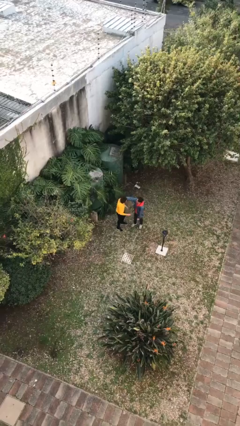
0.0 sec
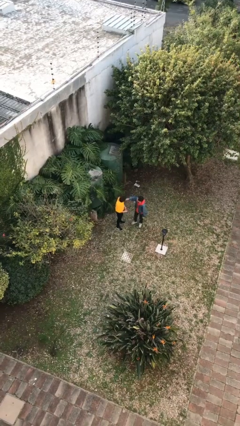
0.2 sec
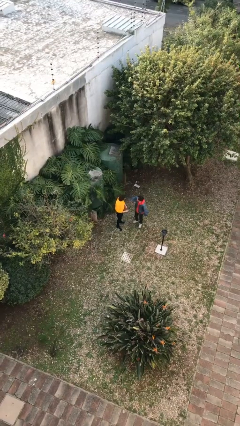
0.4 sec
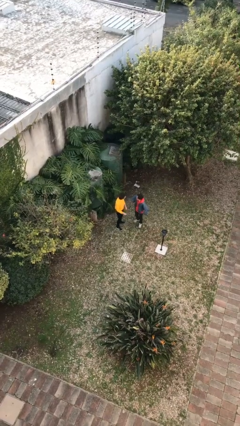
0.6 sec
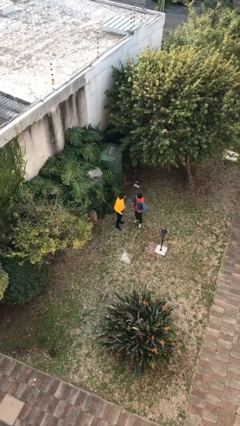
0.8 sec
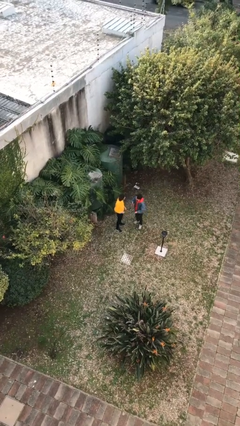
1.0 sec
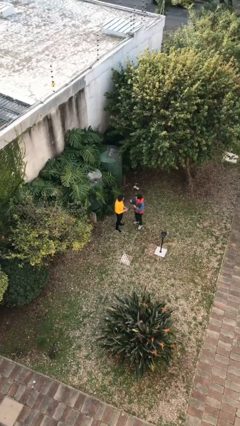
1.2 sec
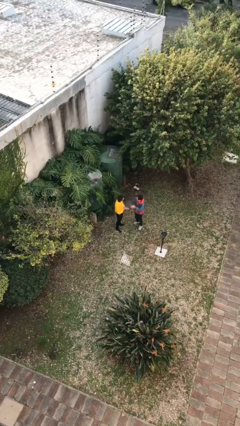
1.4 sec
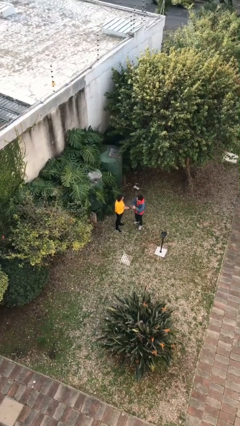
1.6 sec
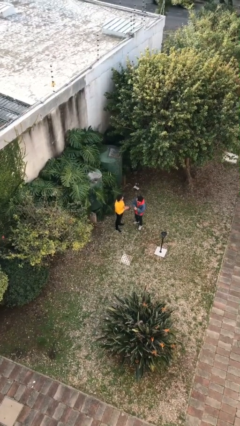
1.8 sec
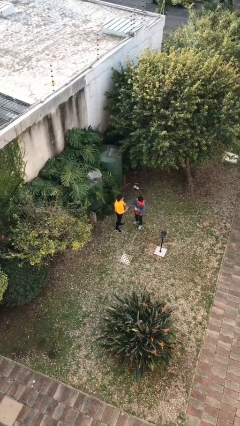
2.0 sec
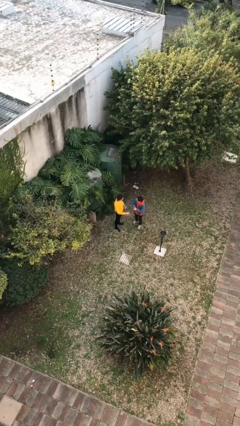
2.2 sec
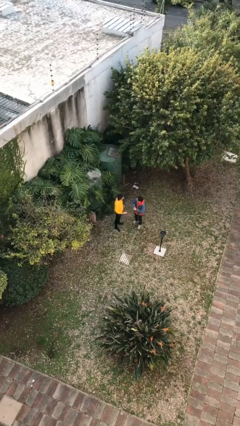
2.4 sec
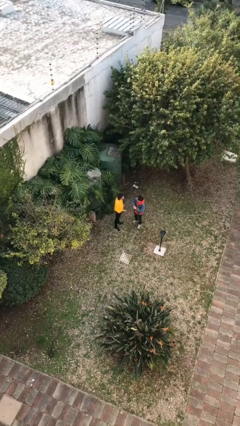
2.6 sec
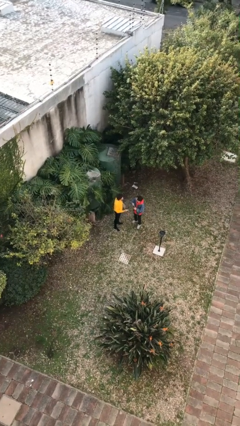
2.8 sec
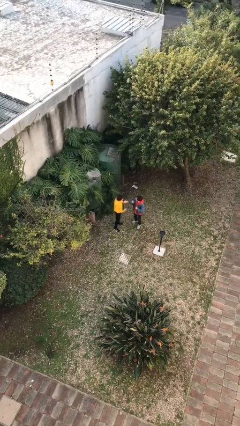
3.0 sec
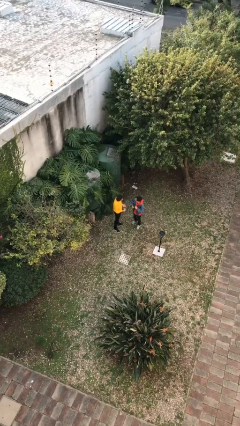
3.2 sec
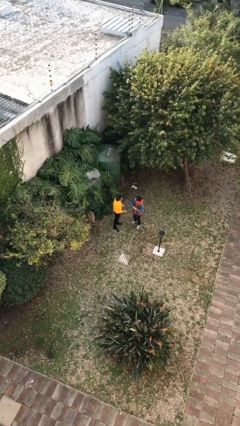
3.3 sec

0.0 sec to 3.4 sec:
person talks to person

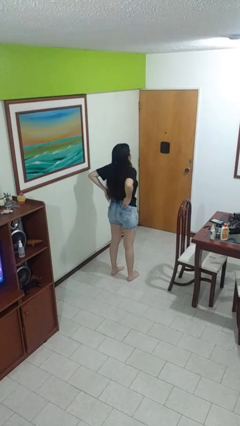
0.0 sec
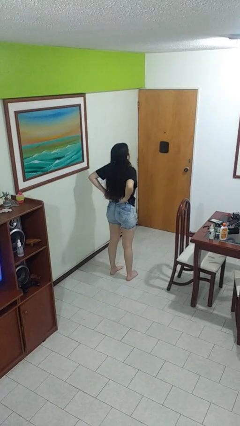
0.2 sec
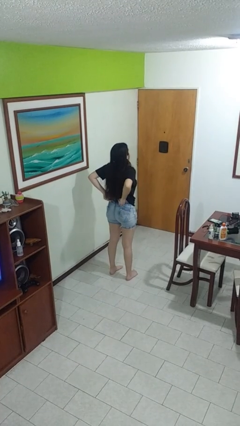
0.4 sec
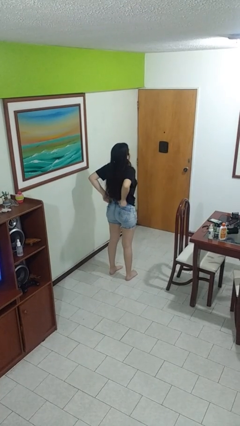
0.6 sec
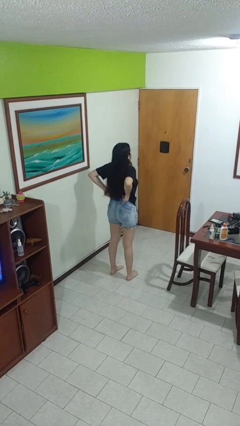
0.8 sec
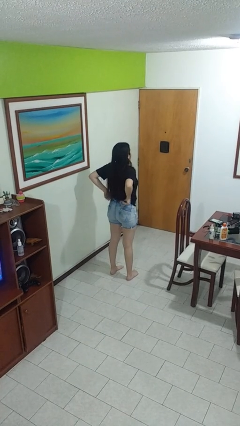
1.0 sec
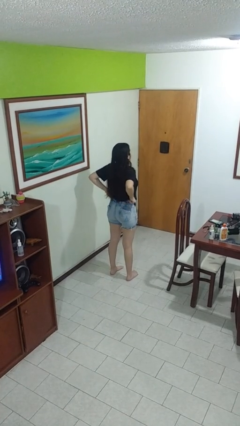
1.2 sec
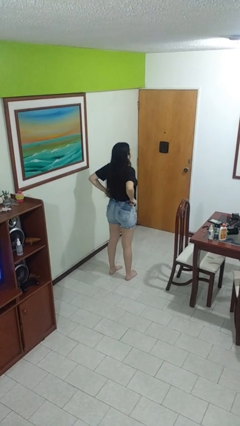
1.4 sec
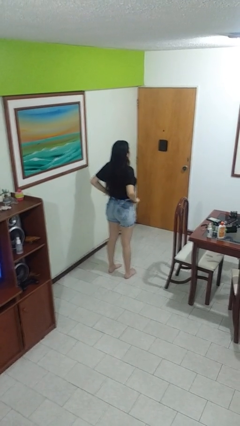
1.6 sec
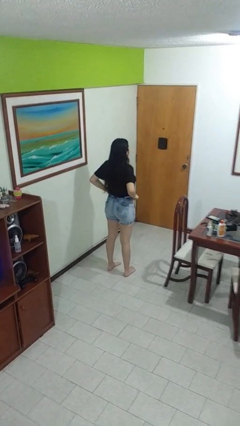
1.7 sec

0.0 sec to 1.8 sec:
person hikes up pants

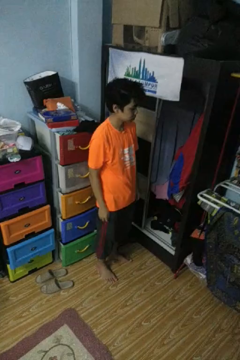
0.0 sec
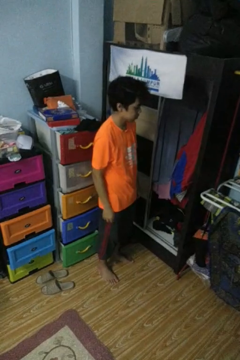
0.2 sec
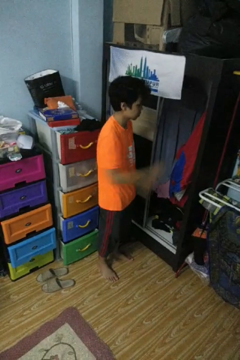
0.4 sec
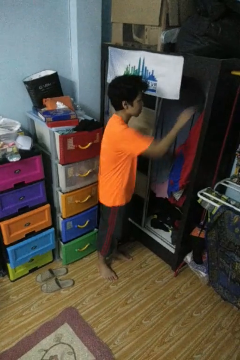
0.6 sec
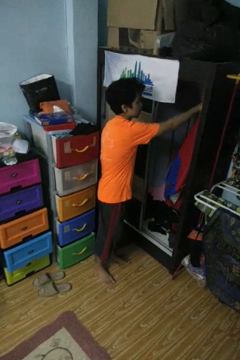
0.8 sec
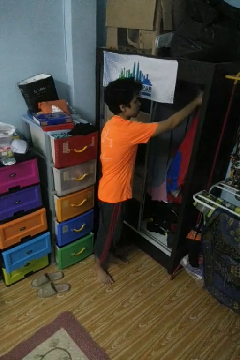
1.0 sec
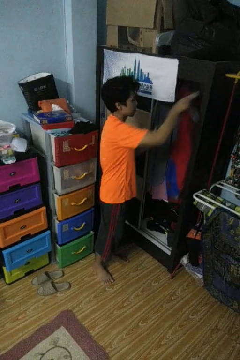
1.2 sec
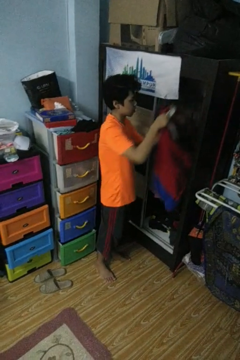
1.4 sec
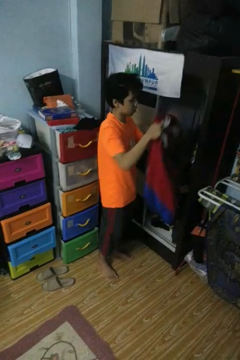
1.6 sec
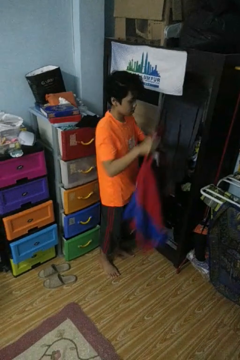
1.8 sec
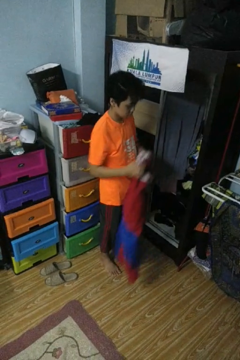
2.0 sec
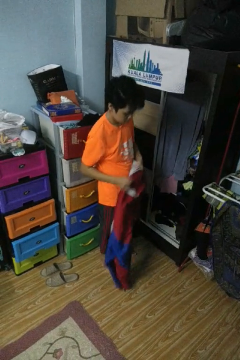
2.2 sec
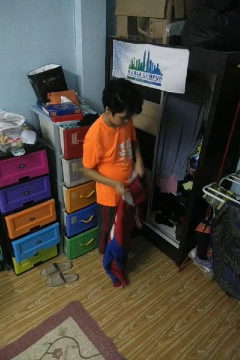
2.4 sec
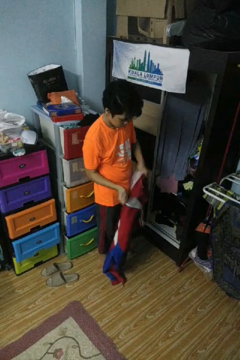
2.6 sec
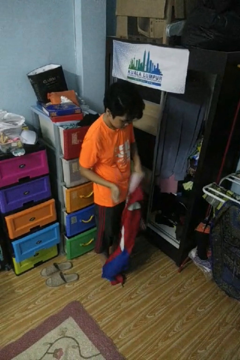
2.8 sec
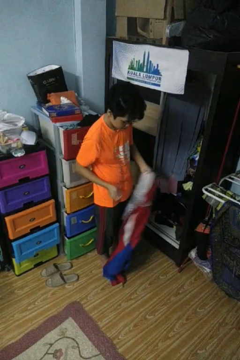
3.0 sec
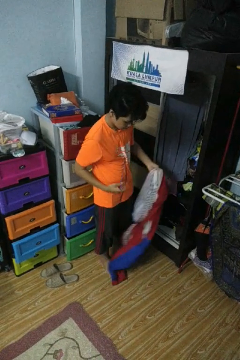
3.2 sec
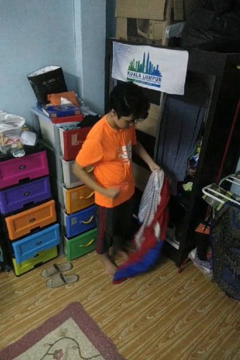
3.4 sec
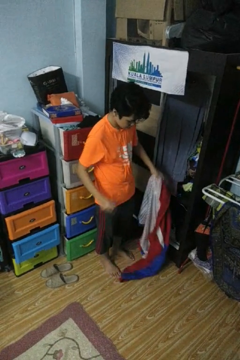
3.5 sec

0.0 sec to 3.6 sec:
person takes clothes from closet

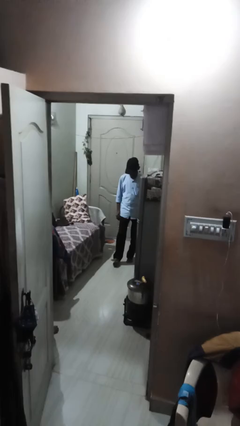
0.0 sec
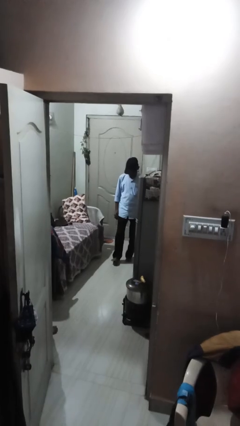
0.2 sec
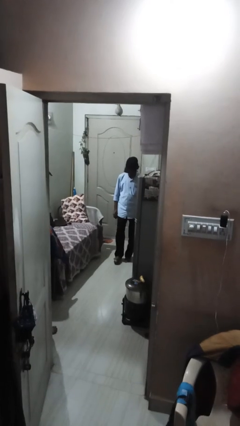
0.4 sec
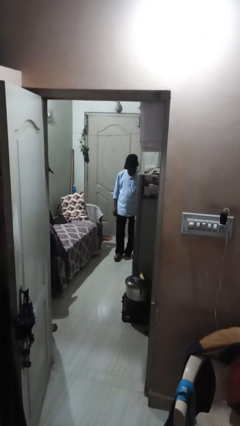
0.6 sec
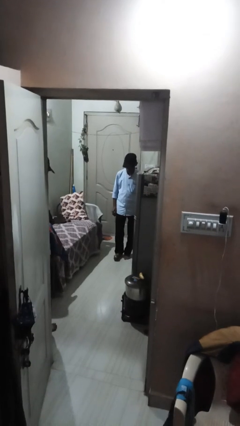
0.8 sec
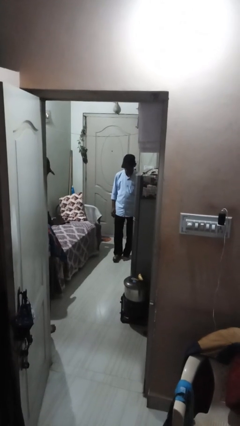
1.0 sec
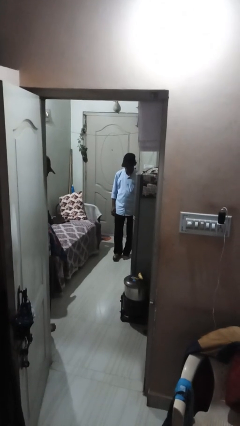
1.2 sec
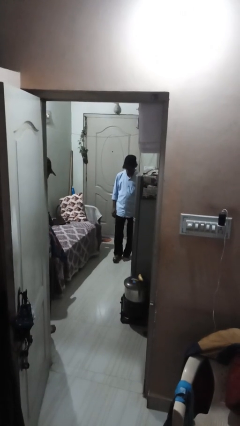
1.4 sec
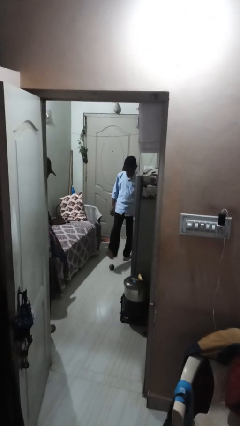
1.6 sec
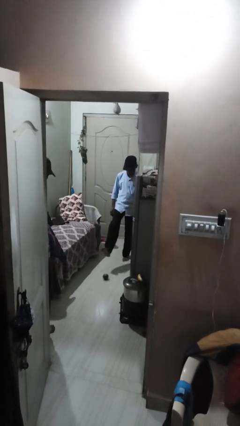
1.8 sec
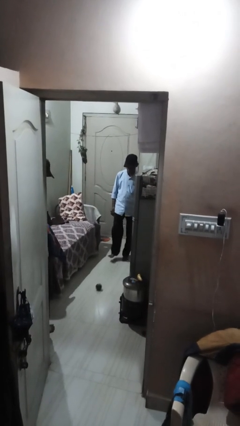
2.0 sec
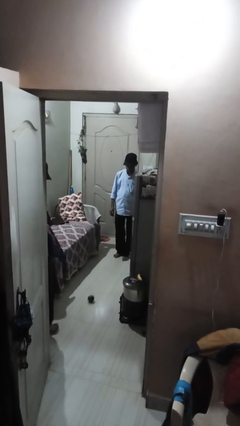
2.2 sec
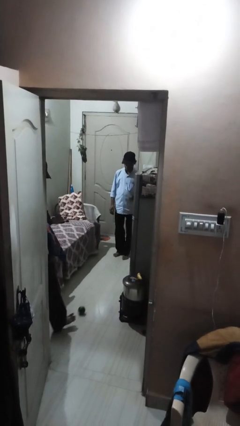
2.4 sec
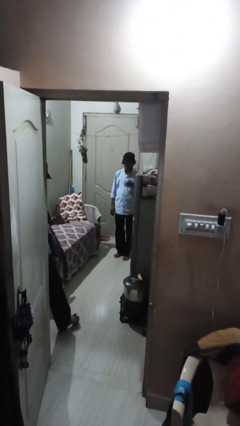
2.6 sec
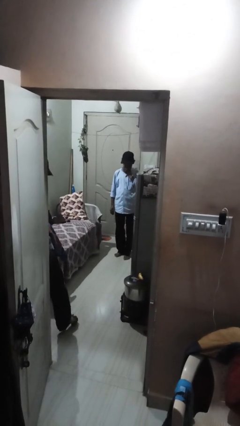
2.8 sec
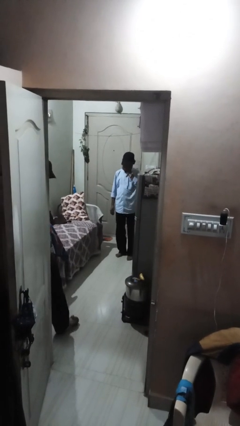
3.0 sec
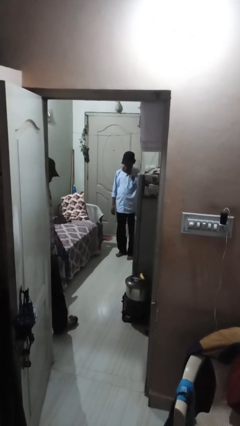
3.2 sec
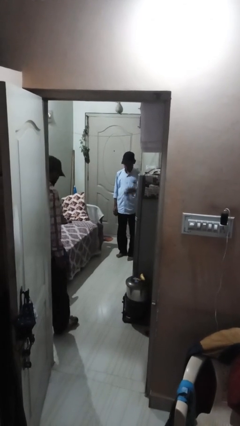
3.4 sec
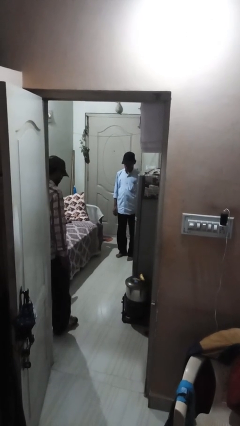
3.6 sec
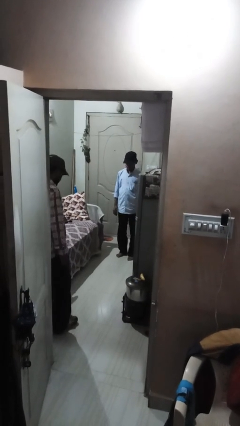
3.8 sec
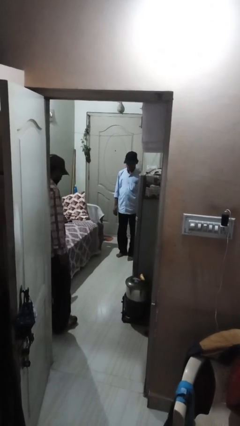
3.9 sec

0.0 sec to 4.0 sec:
person kicks object to person

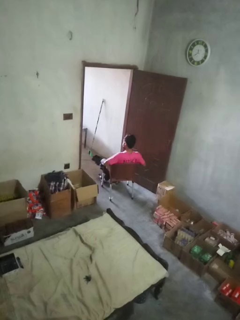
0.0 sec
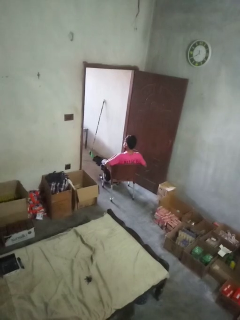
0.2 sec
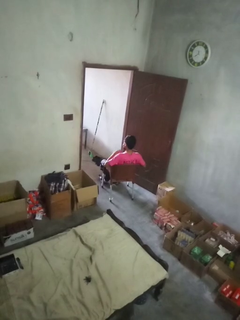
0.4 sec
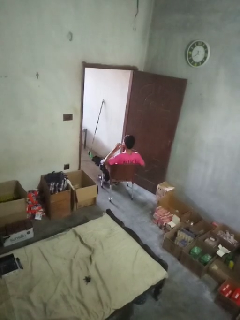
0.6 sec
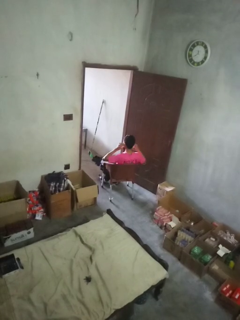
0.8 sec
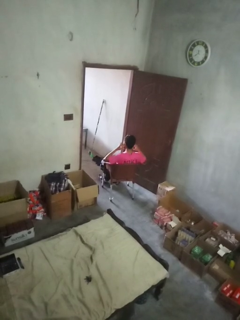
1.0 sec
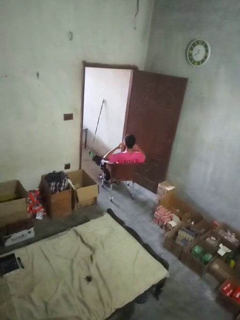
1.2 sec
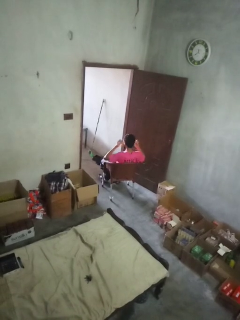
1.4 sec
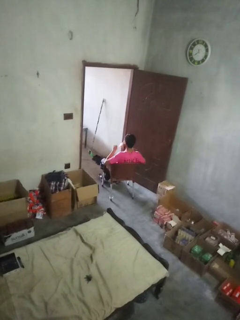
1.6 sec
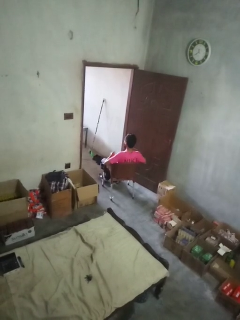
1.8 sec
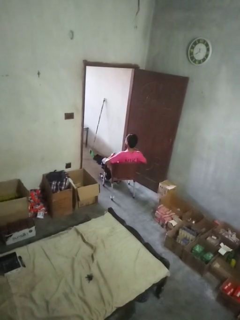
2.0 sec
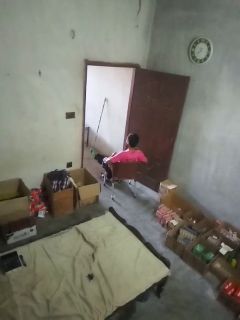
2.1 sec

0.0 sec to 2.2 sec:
person takes off facemask

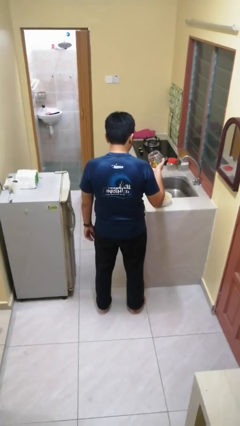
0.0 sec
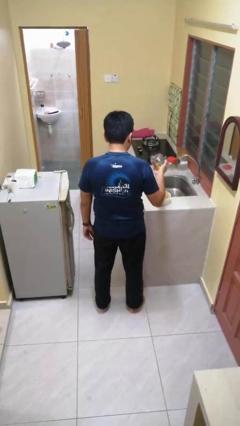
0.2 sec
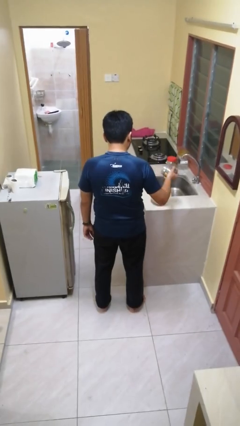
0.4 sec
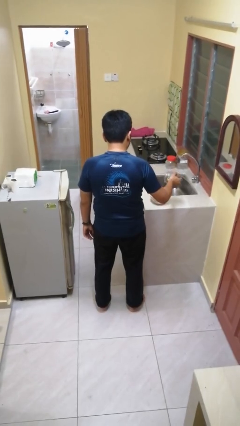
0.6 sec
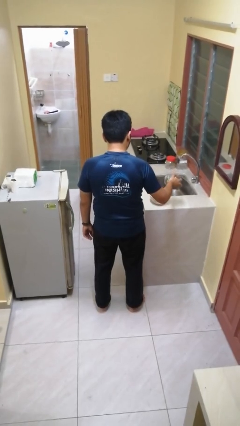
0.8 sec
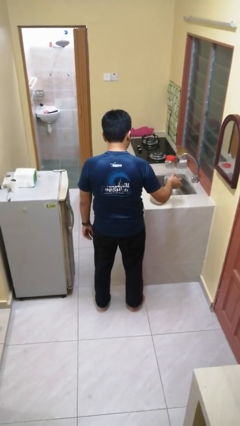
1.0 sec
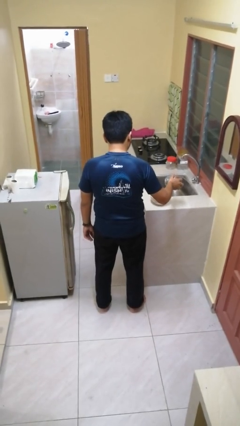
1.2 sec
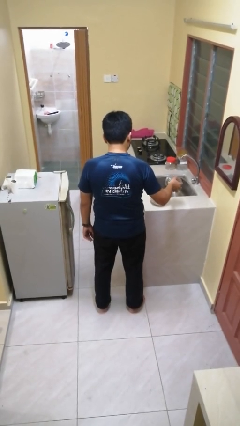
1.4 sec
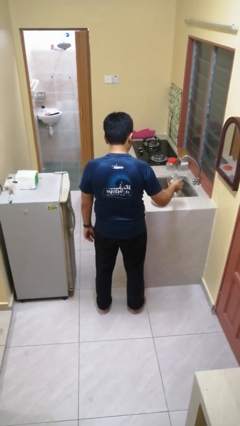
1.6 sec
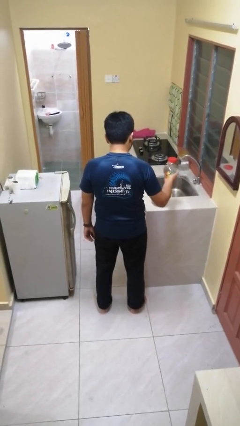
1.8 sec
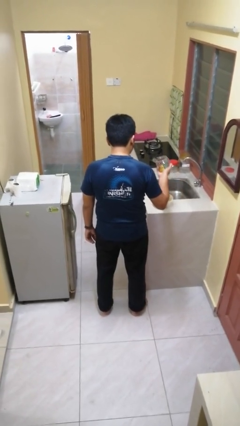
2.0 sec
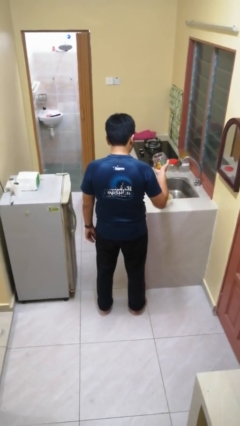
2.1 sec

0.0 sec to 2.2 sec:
person pours into bowl

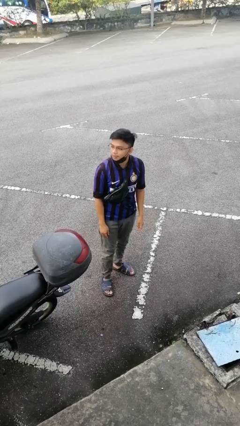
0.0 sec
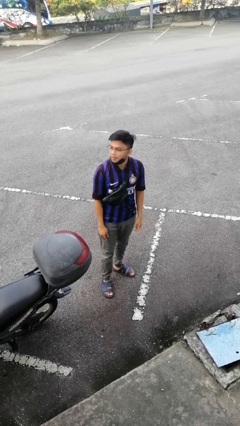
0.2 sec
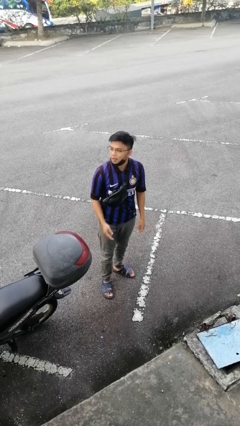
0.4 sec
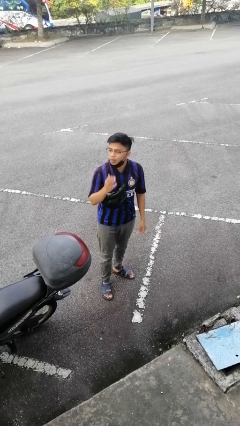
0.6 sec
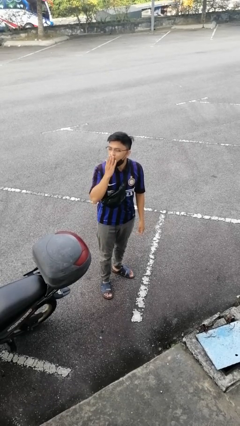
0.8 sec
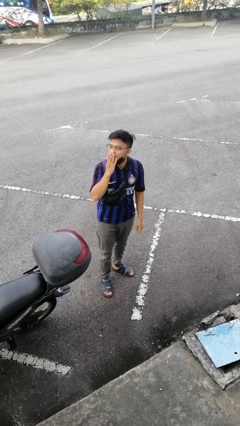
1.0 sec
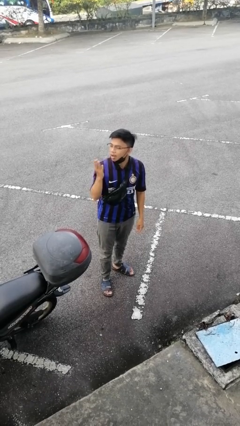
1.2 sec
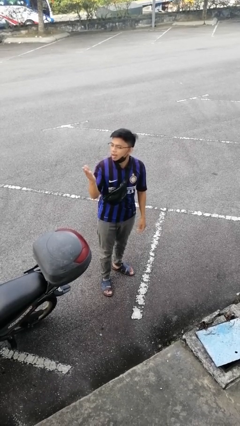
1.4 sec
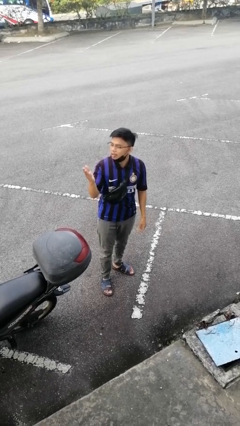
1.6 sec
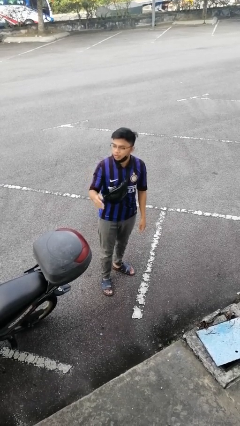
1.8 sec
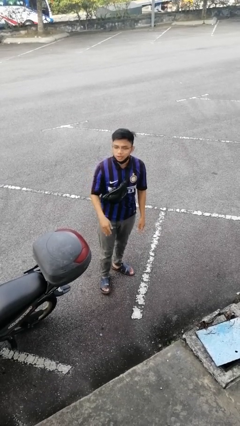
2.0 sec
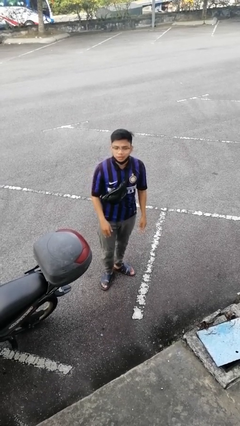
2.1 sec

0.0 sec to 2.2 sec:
person gestures blow kiss
